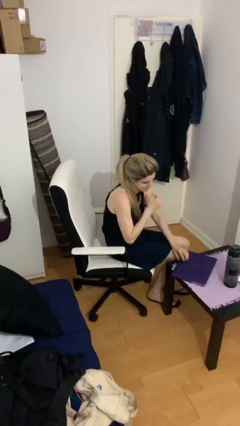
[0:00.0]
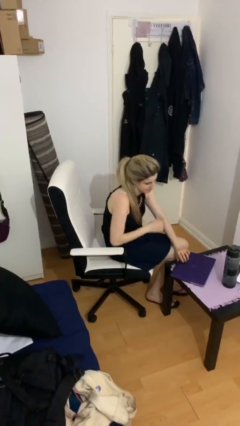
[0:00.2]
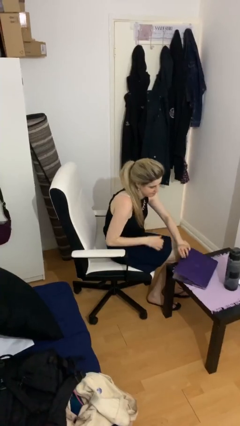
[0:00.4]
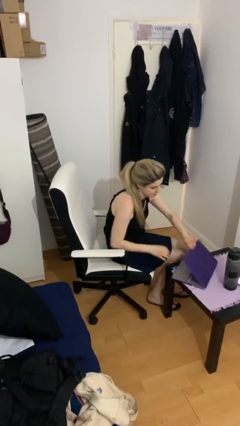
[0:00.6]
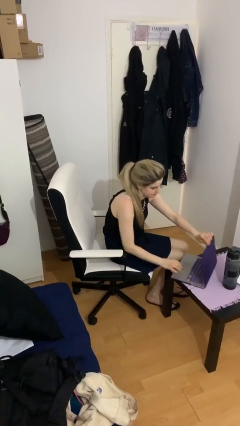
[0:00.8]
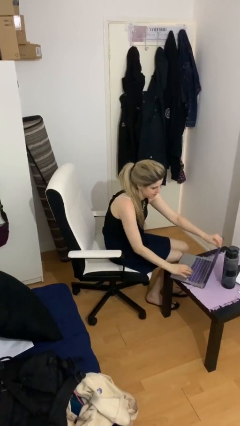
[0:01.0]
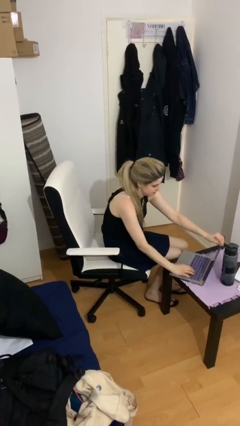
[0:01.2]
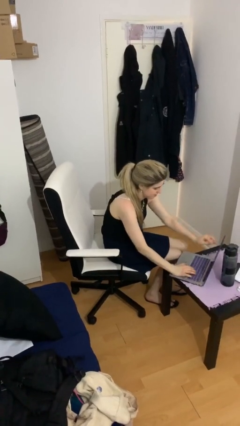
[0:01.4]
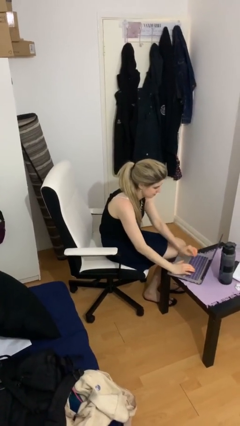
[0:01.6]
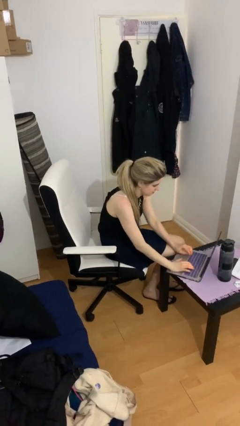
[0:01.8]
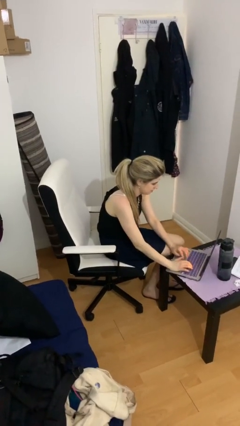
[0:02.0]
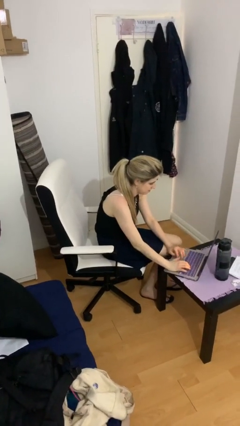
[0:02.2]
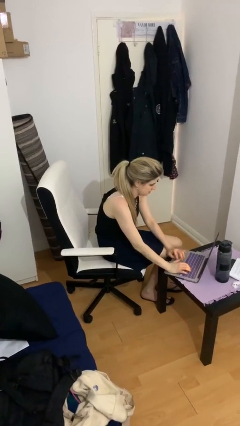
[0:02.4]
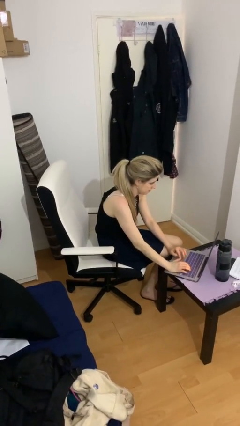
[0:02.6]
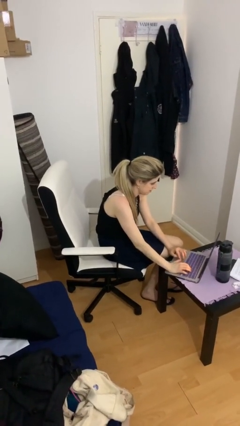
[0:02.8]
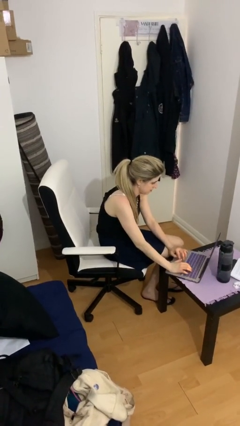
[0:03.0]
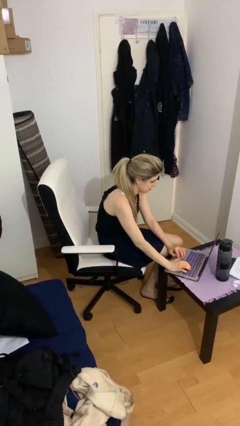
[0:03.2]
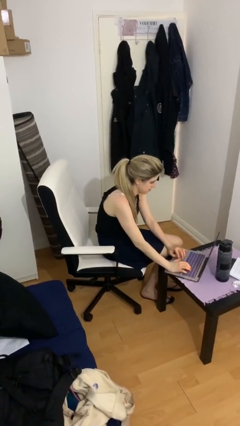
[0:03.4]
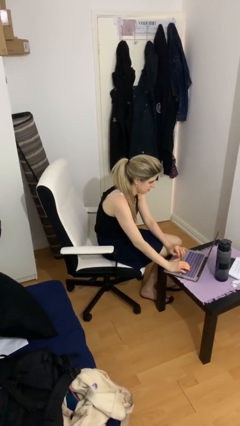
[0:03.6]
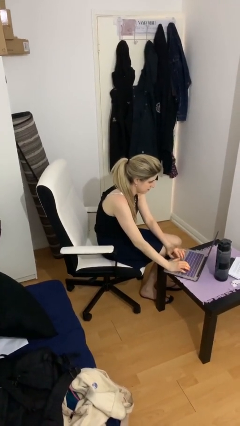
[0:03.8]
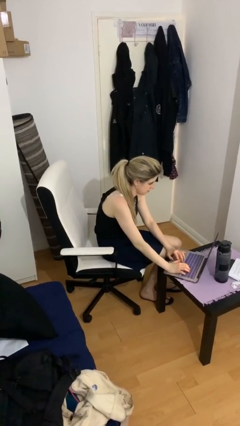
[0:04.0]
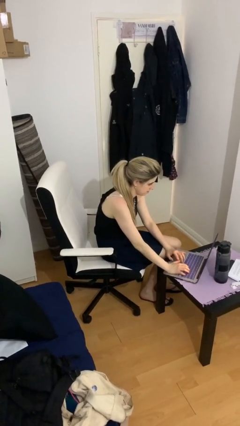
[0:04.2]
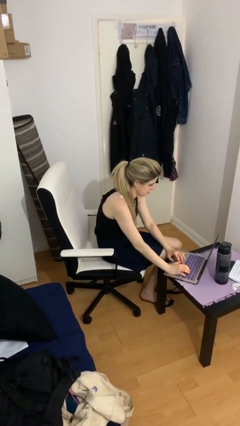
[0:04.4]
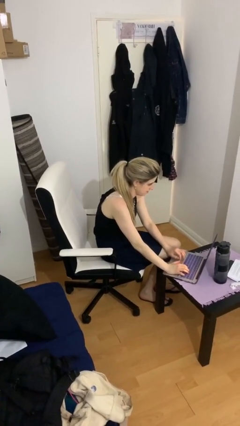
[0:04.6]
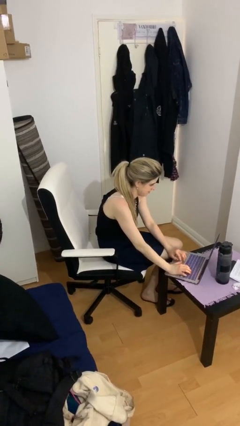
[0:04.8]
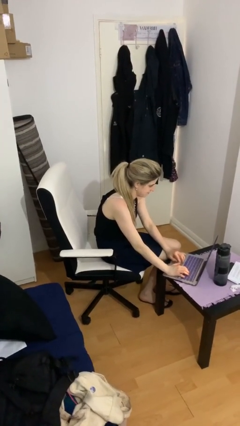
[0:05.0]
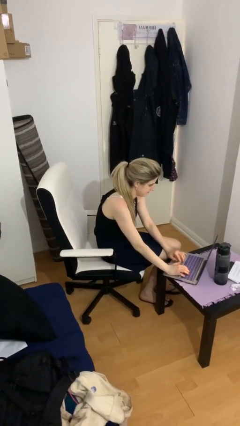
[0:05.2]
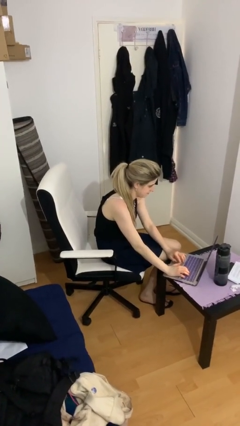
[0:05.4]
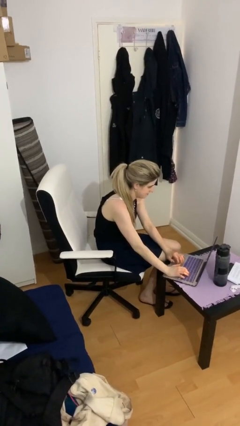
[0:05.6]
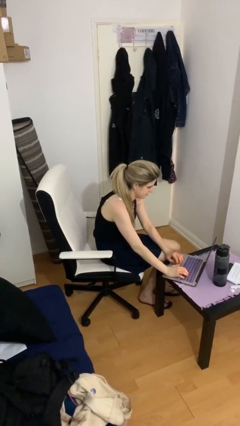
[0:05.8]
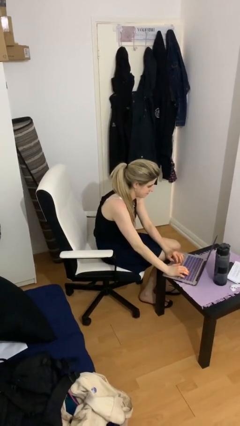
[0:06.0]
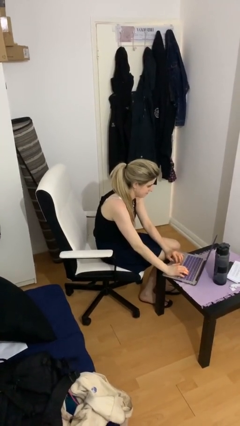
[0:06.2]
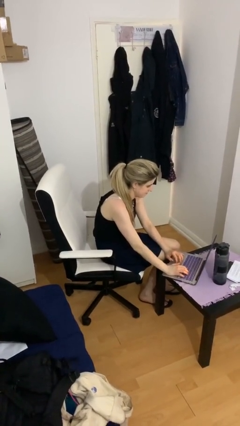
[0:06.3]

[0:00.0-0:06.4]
person interacts with laptop

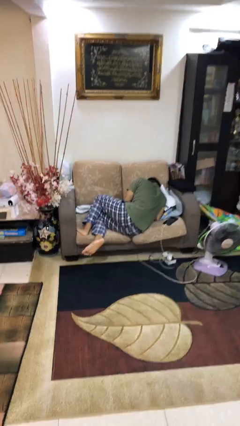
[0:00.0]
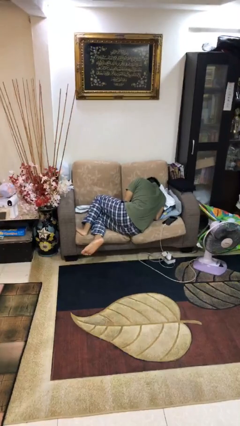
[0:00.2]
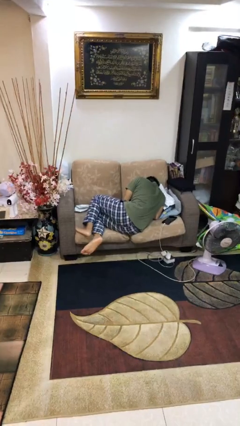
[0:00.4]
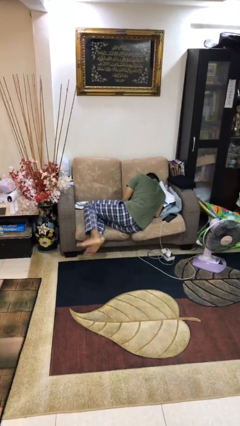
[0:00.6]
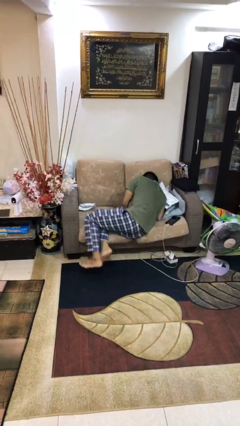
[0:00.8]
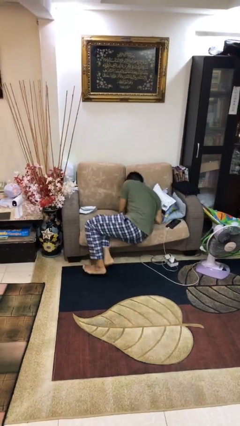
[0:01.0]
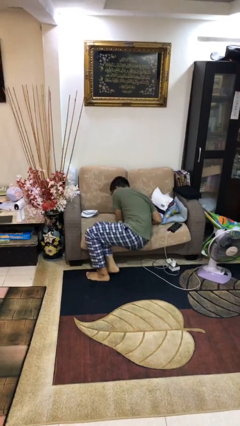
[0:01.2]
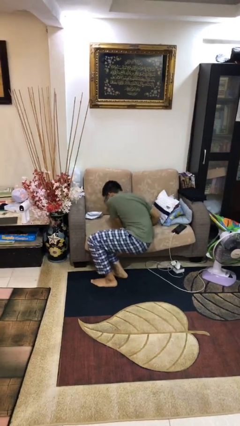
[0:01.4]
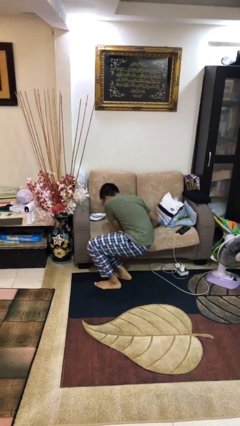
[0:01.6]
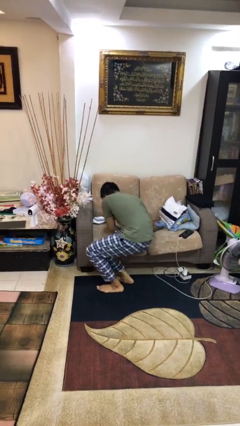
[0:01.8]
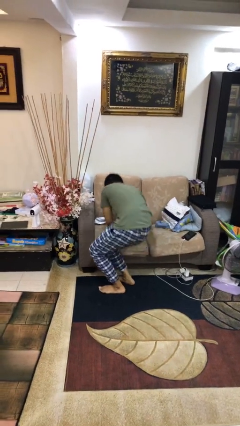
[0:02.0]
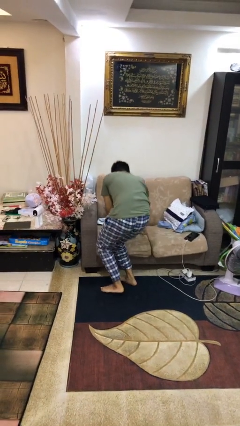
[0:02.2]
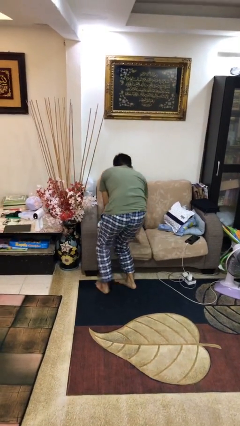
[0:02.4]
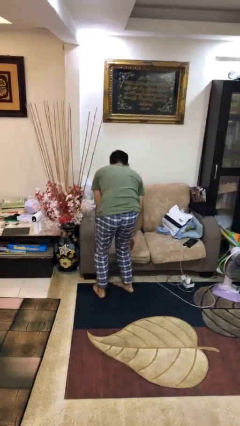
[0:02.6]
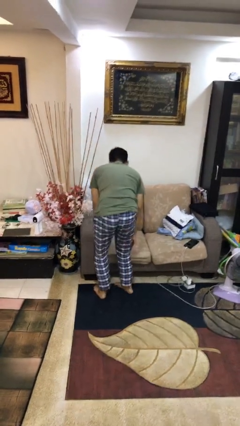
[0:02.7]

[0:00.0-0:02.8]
person stands up

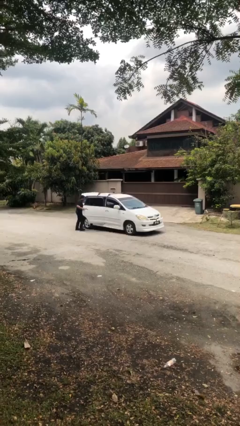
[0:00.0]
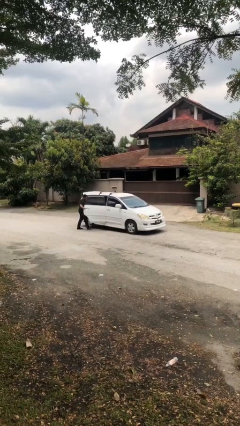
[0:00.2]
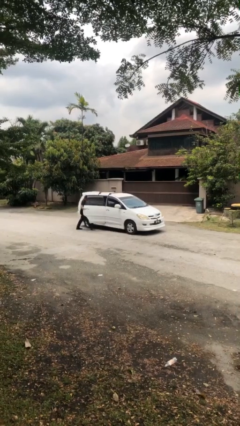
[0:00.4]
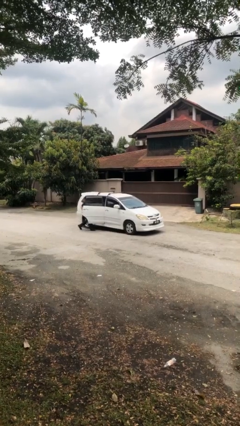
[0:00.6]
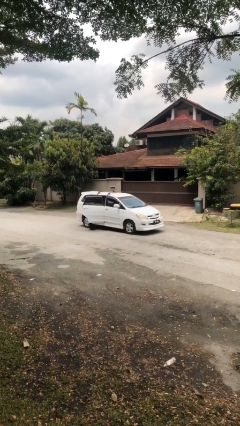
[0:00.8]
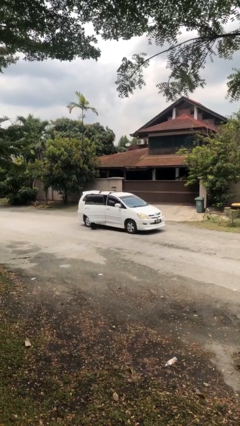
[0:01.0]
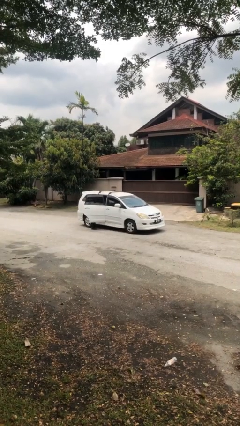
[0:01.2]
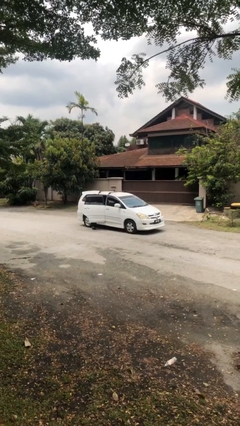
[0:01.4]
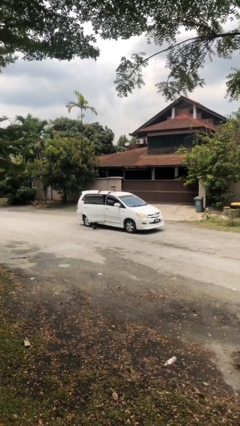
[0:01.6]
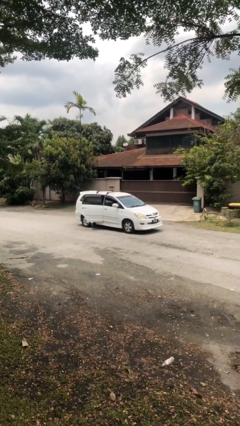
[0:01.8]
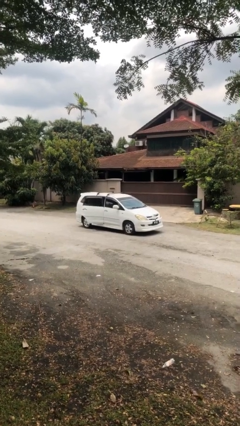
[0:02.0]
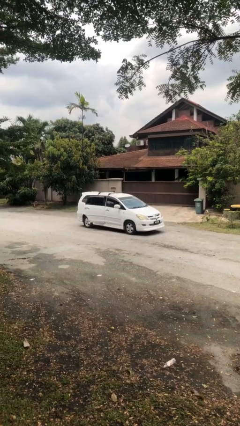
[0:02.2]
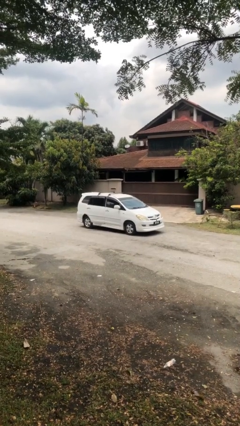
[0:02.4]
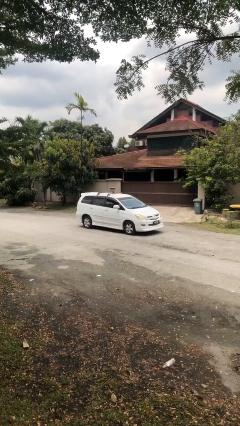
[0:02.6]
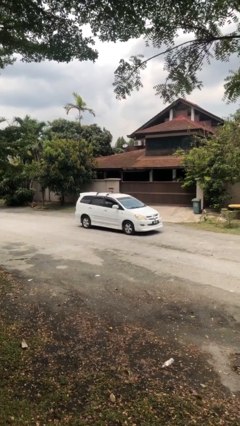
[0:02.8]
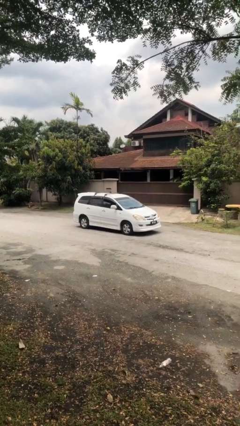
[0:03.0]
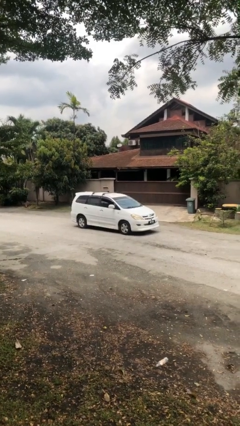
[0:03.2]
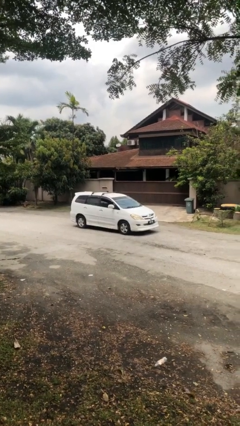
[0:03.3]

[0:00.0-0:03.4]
car picks up person

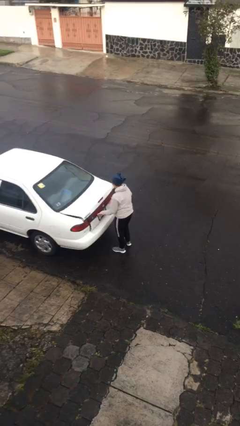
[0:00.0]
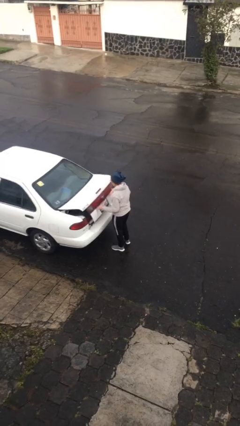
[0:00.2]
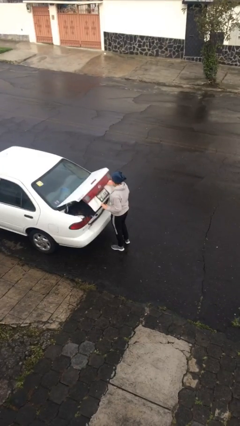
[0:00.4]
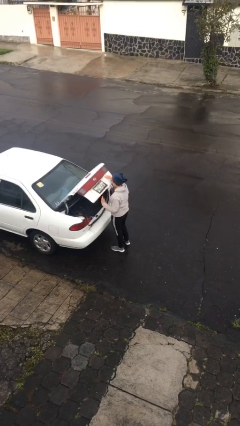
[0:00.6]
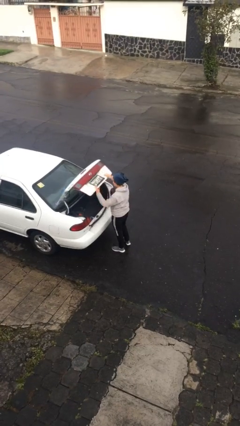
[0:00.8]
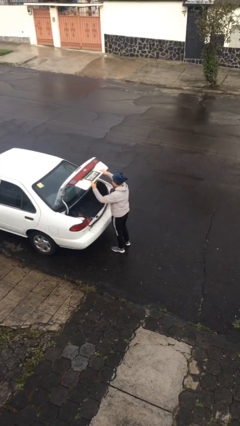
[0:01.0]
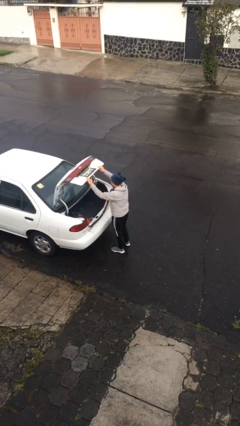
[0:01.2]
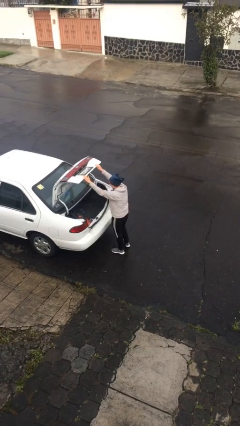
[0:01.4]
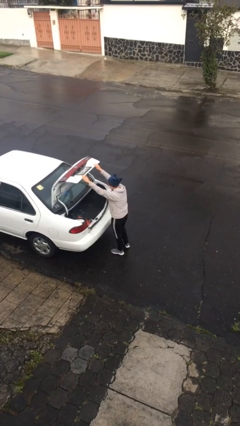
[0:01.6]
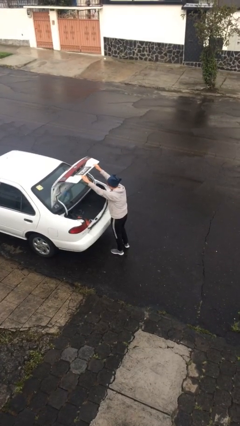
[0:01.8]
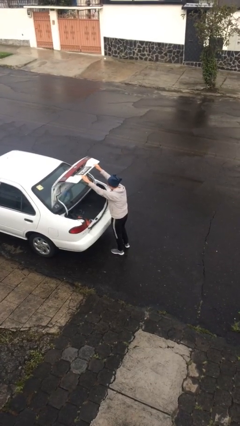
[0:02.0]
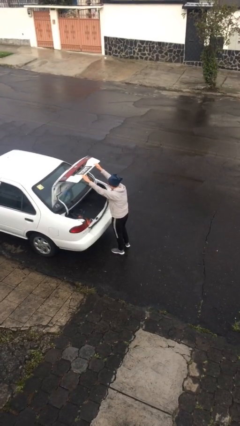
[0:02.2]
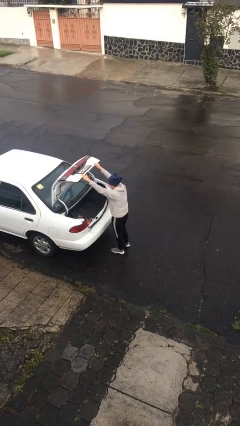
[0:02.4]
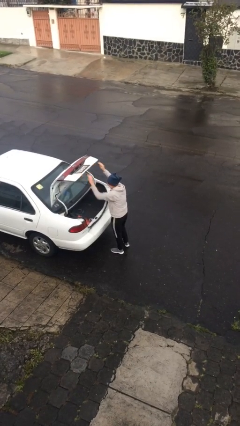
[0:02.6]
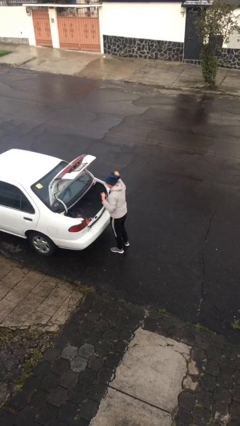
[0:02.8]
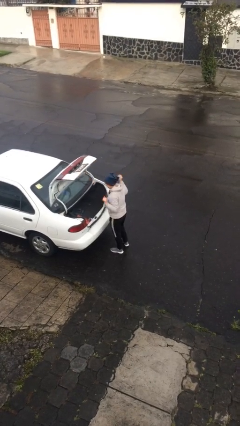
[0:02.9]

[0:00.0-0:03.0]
person opens car trunk

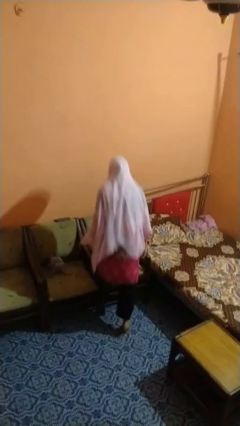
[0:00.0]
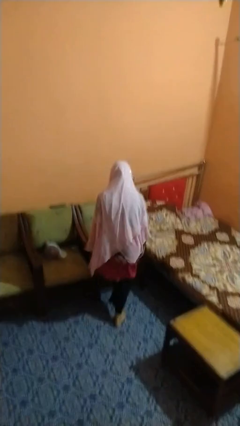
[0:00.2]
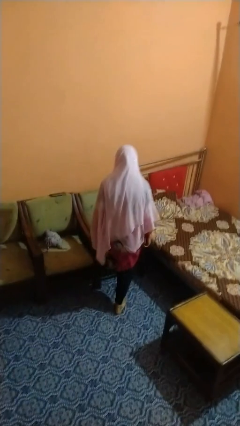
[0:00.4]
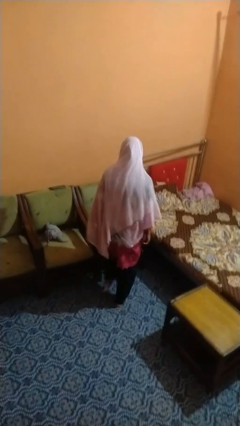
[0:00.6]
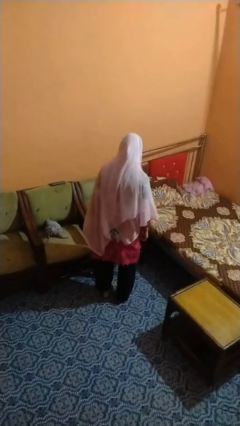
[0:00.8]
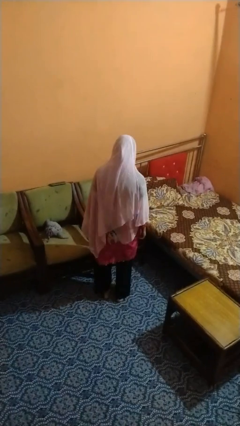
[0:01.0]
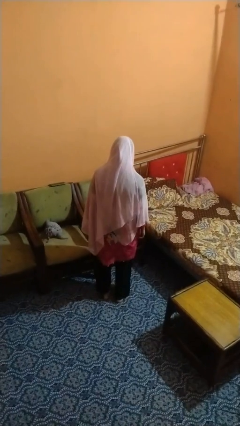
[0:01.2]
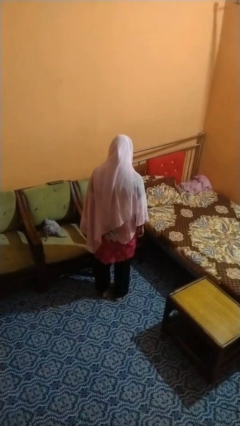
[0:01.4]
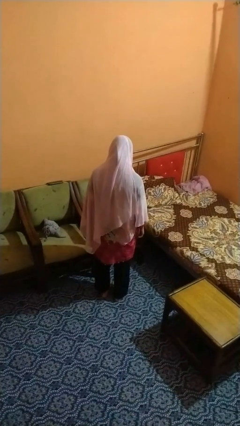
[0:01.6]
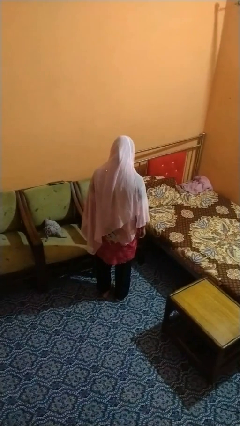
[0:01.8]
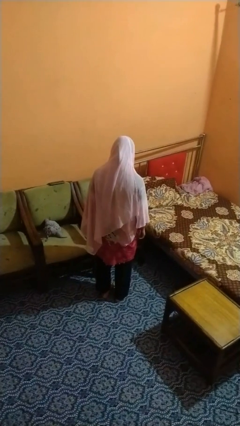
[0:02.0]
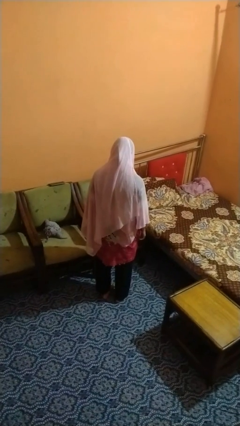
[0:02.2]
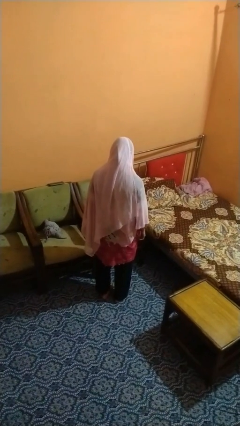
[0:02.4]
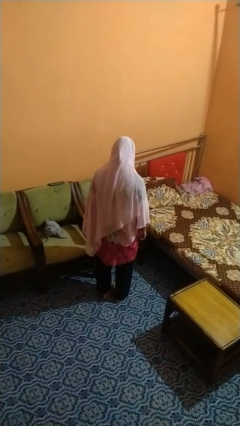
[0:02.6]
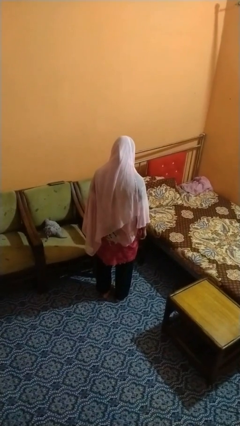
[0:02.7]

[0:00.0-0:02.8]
person climbs off chair
